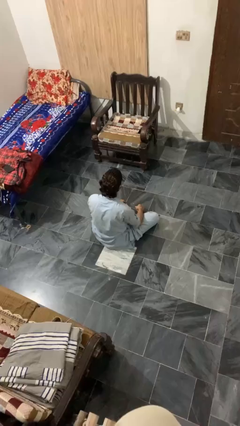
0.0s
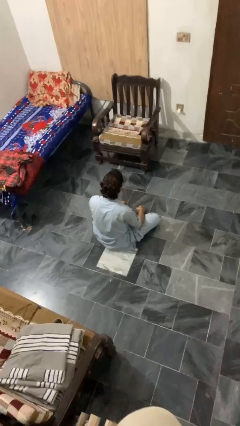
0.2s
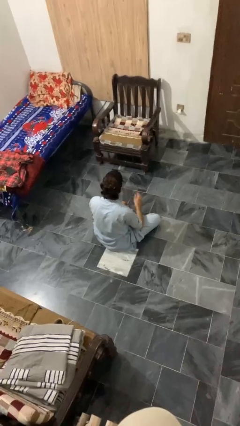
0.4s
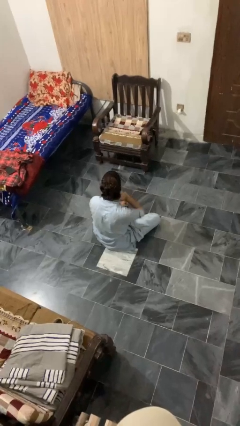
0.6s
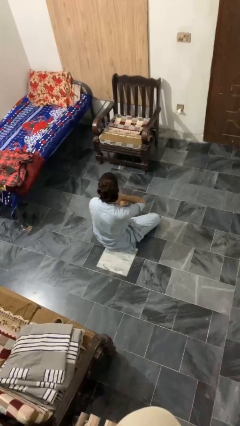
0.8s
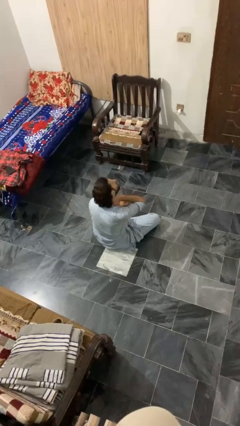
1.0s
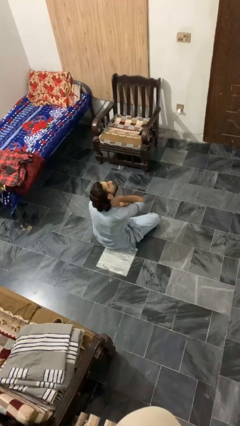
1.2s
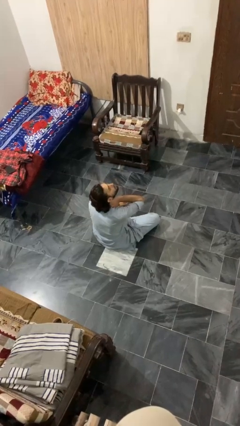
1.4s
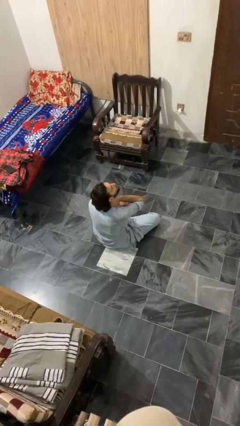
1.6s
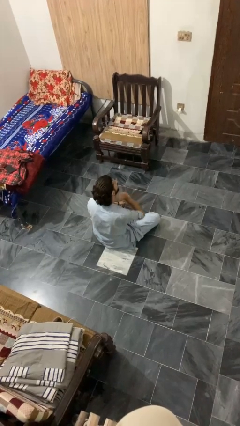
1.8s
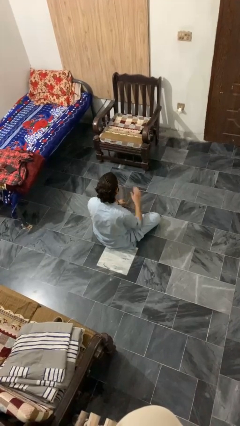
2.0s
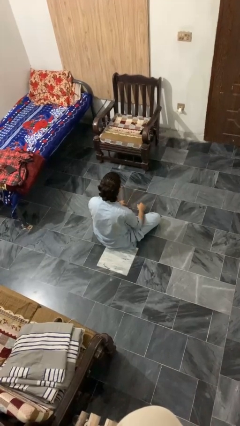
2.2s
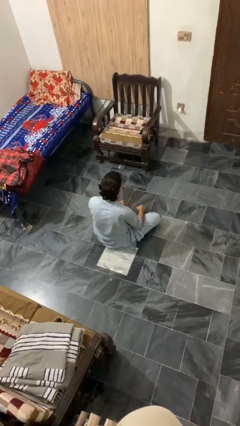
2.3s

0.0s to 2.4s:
person rubs neck

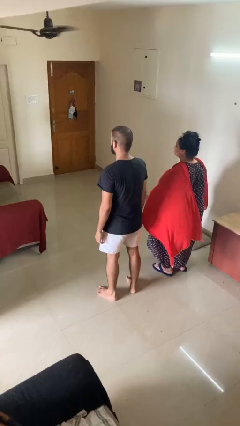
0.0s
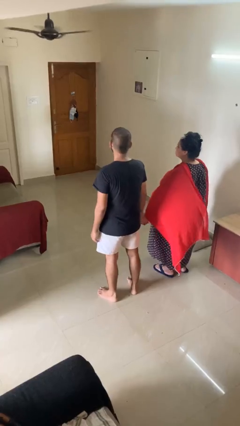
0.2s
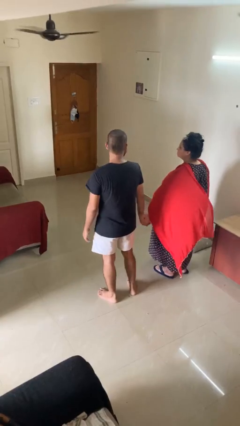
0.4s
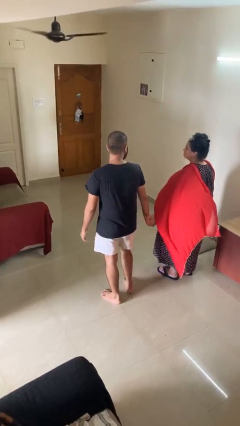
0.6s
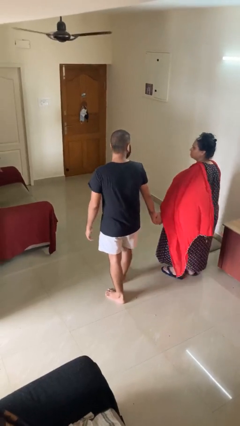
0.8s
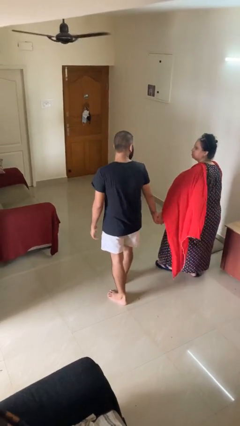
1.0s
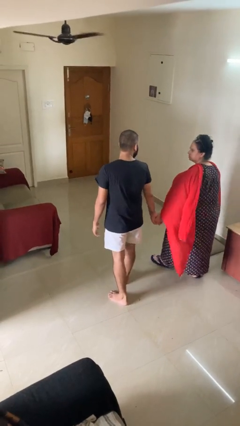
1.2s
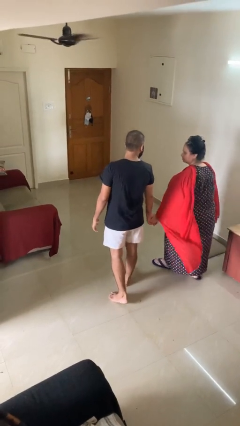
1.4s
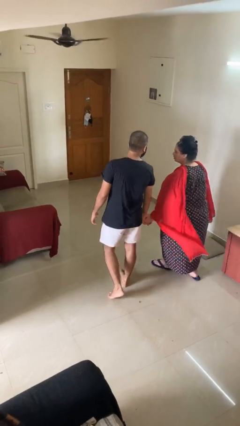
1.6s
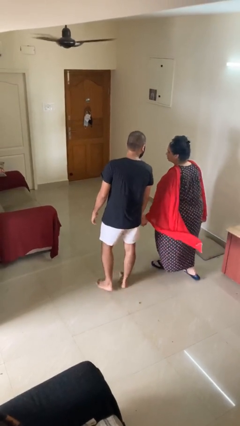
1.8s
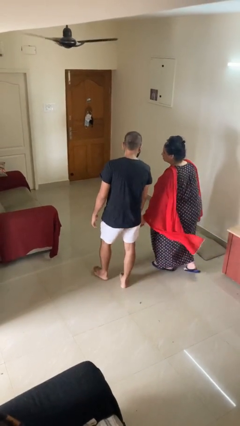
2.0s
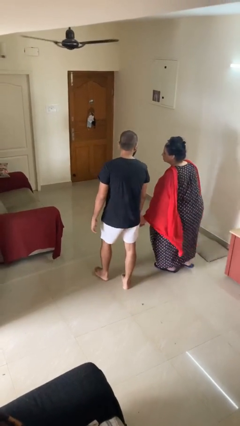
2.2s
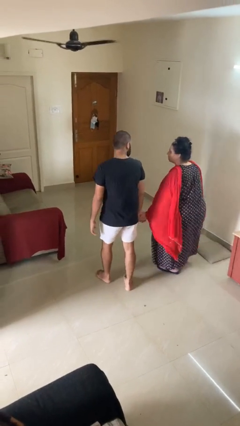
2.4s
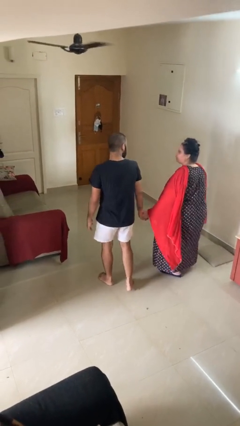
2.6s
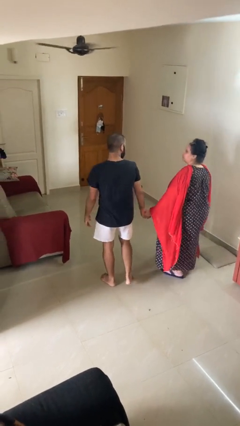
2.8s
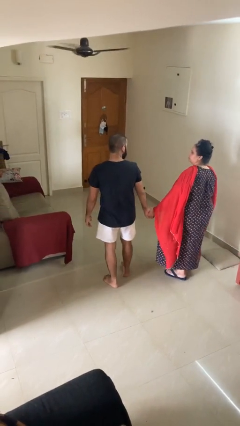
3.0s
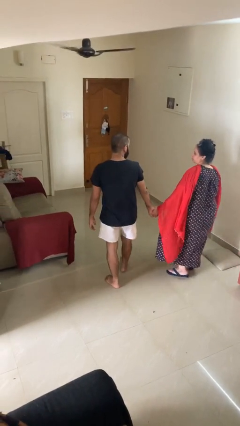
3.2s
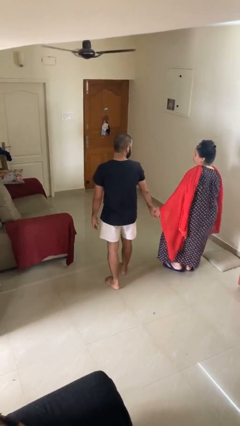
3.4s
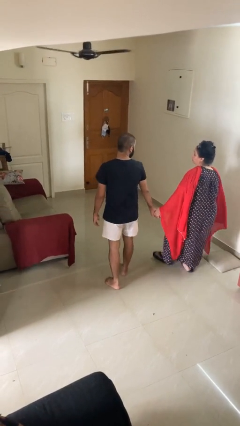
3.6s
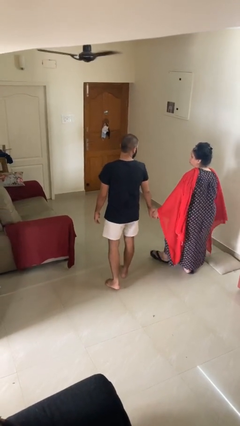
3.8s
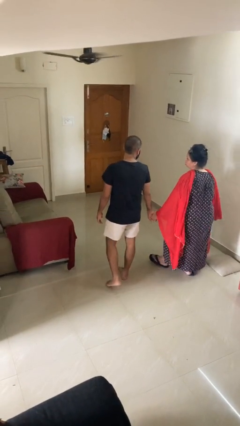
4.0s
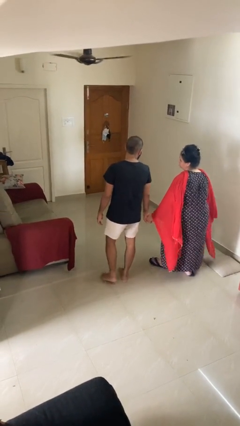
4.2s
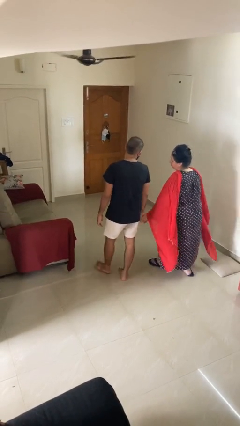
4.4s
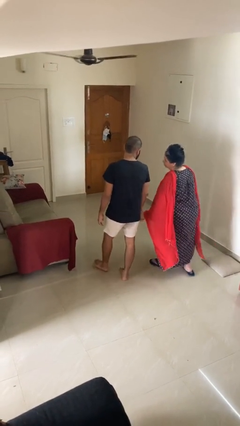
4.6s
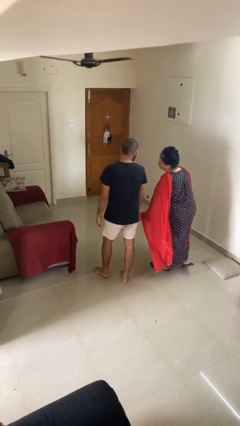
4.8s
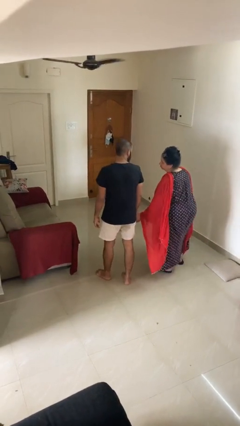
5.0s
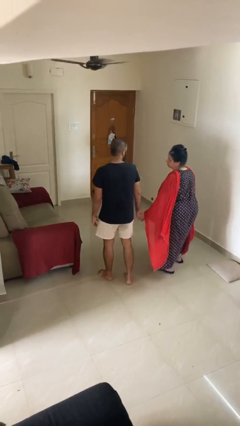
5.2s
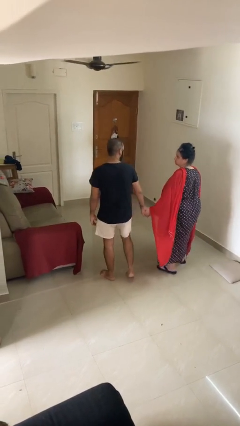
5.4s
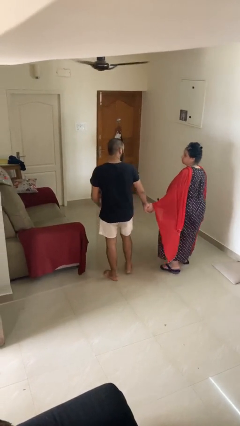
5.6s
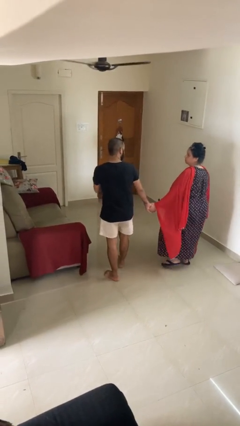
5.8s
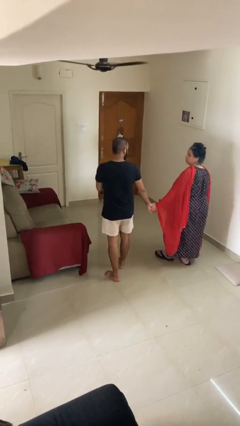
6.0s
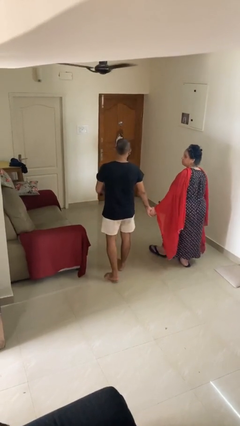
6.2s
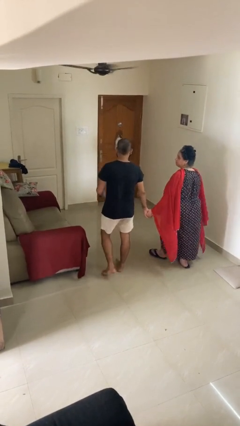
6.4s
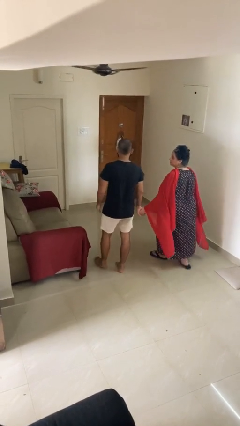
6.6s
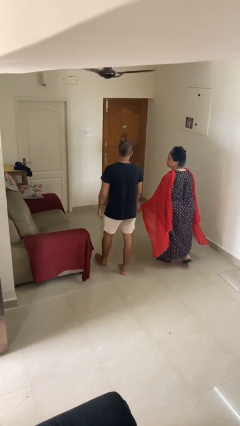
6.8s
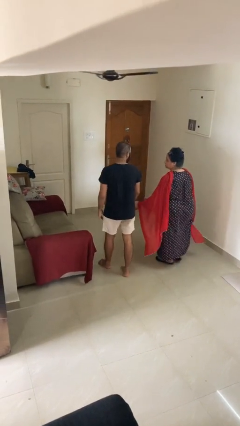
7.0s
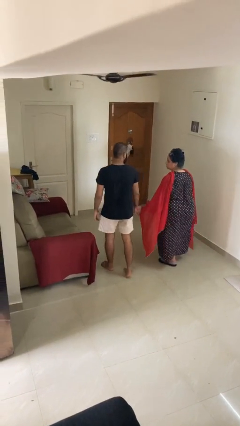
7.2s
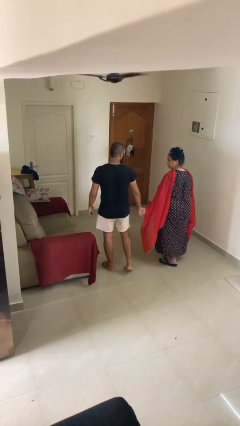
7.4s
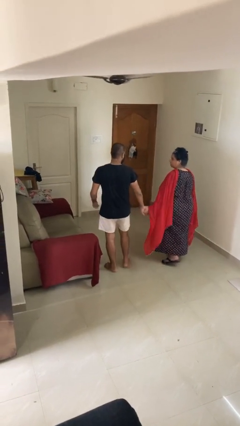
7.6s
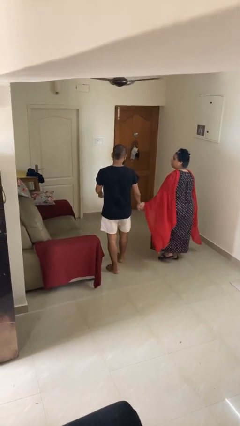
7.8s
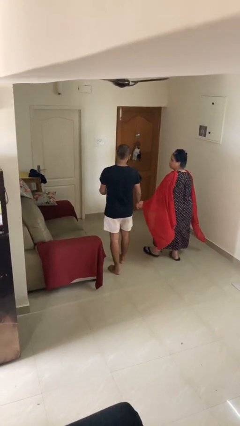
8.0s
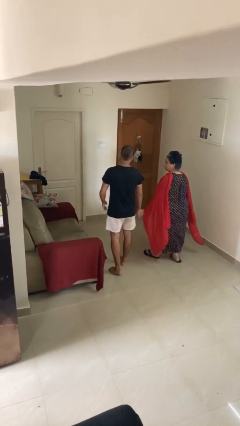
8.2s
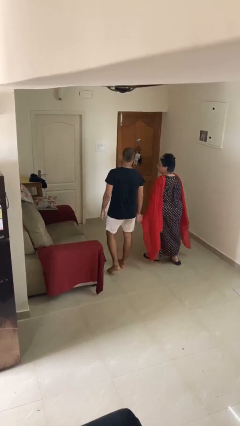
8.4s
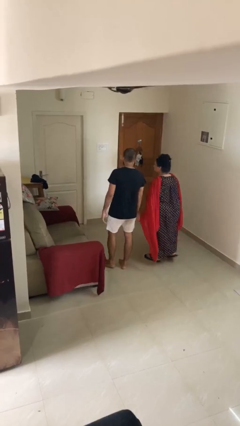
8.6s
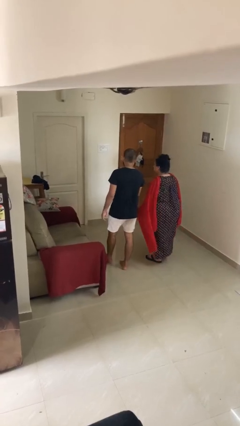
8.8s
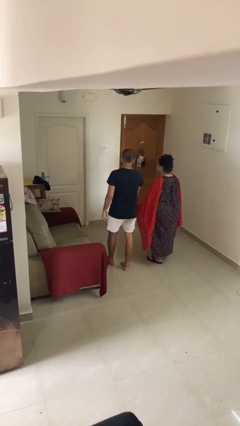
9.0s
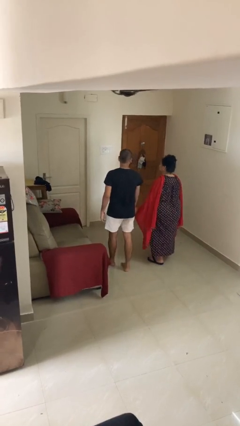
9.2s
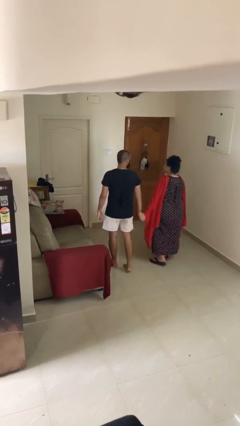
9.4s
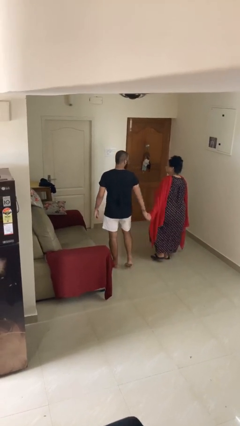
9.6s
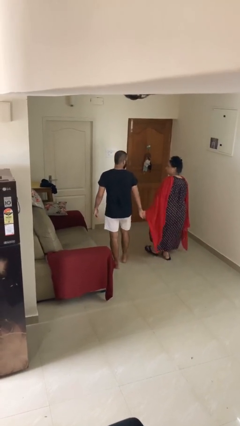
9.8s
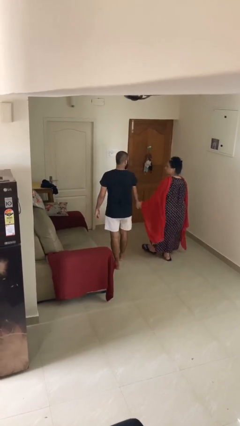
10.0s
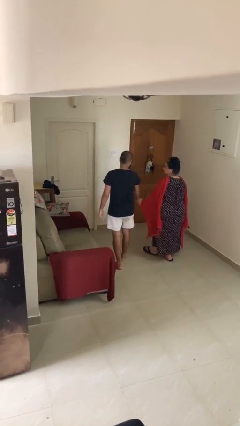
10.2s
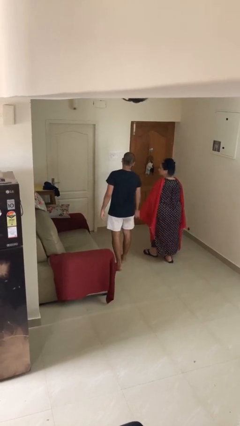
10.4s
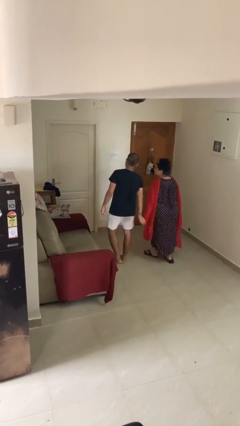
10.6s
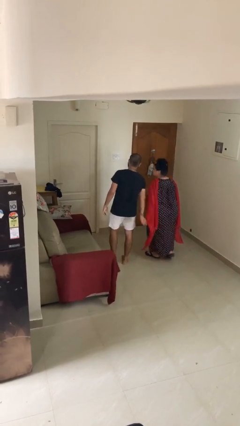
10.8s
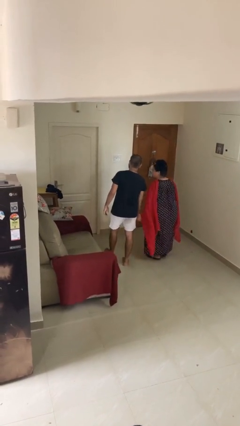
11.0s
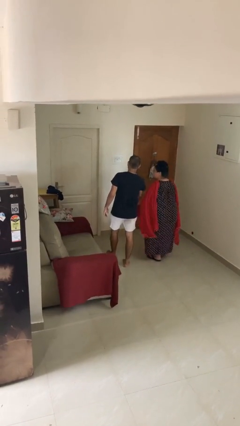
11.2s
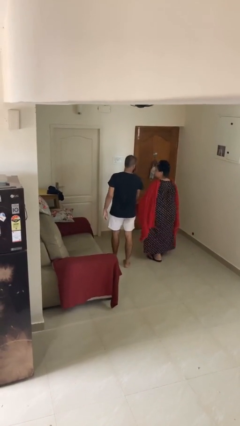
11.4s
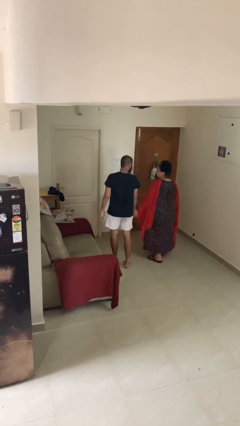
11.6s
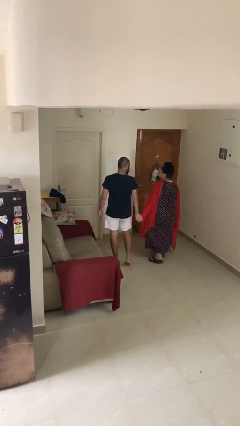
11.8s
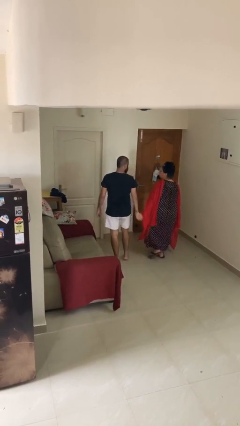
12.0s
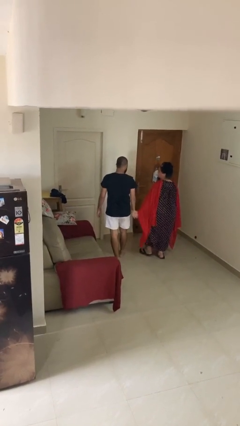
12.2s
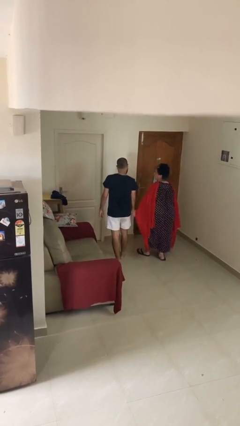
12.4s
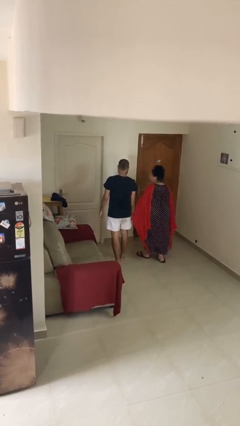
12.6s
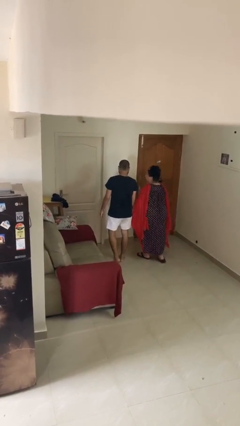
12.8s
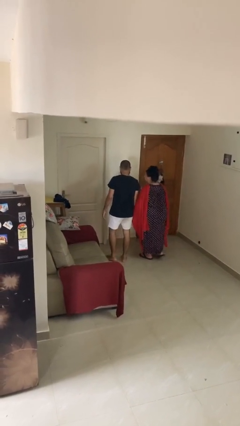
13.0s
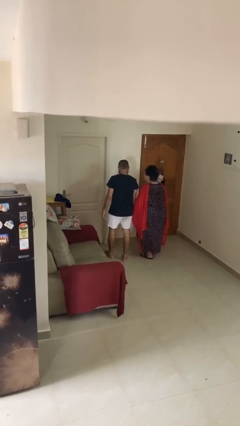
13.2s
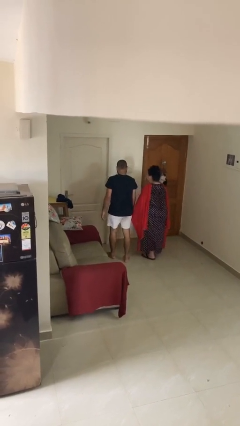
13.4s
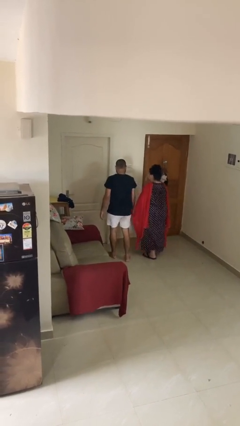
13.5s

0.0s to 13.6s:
person holds hand

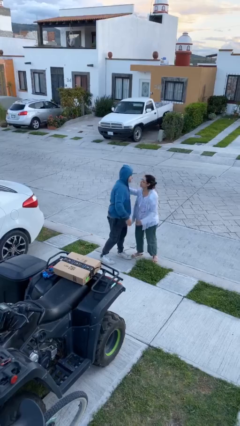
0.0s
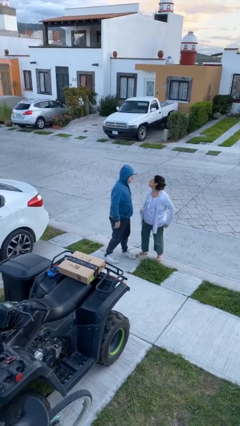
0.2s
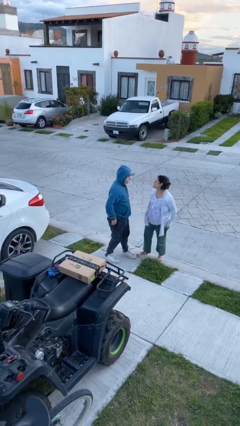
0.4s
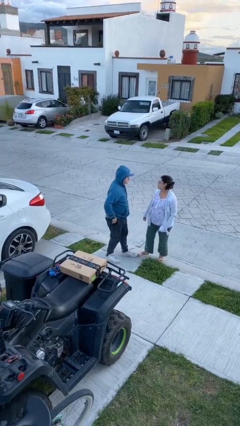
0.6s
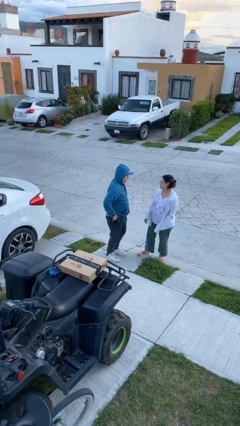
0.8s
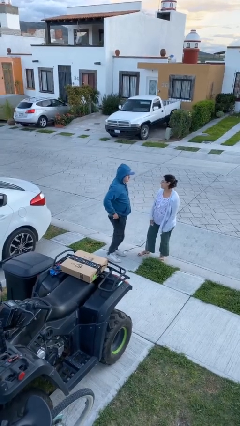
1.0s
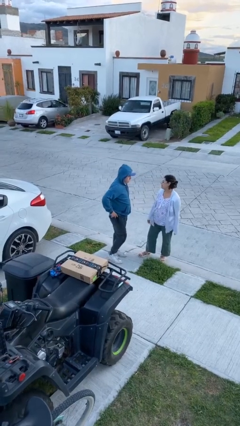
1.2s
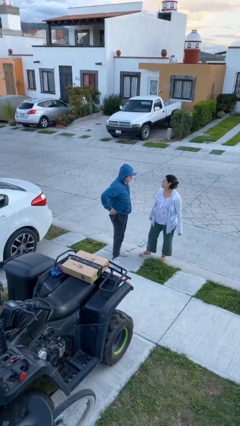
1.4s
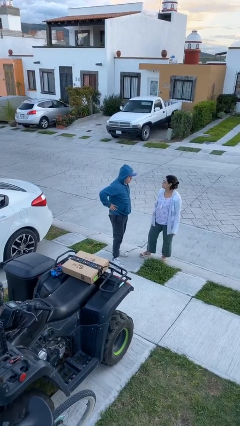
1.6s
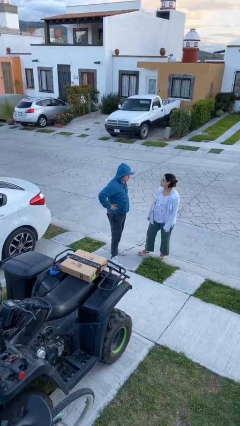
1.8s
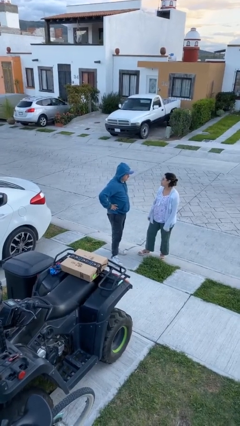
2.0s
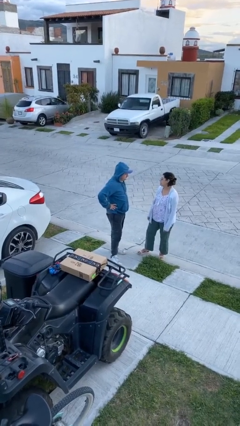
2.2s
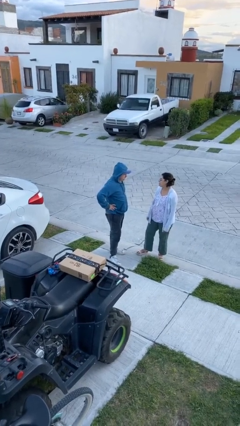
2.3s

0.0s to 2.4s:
person talks to person
